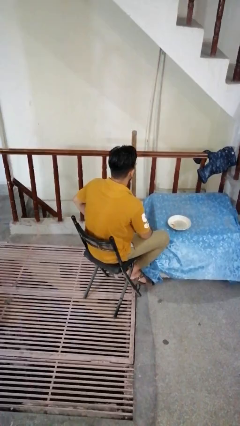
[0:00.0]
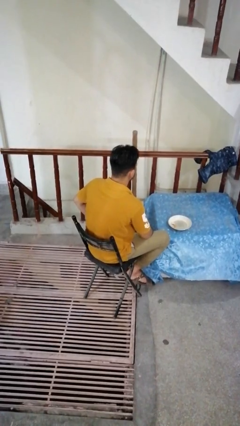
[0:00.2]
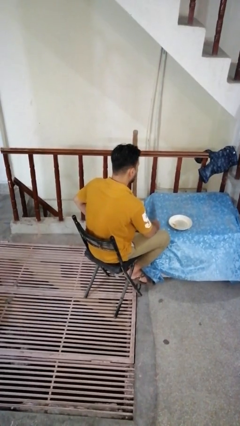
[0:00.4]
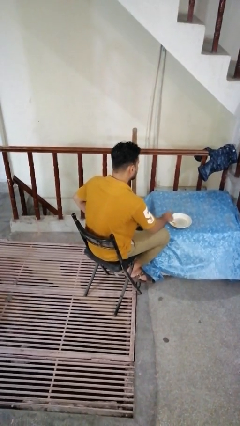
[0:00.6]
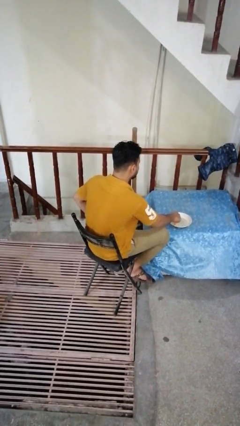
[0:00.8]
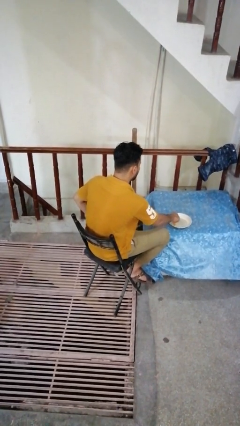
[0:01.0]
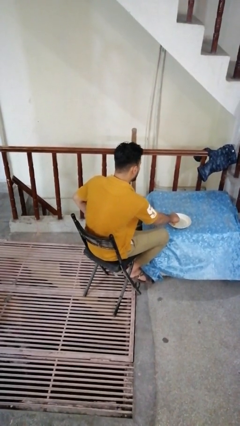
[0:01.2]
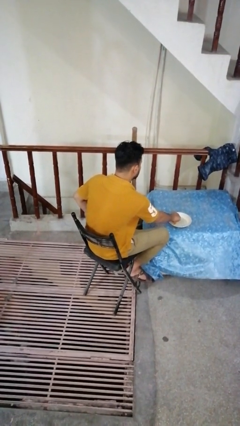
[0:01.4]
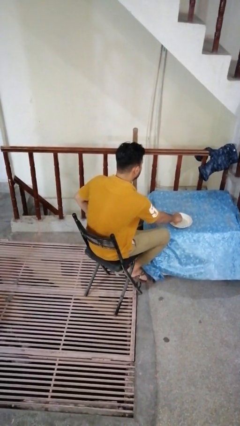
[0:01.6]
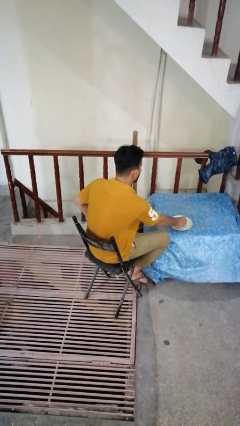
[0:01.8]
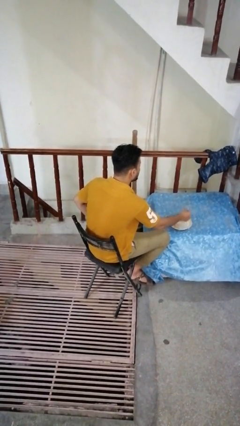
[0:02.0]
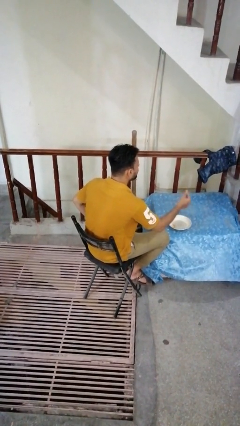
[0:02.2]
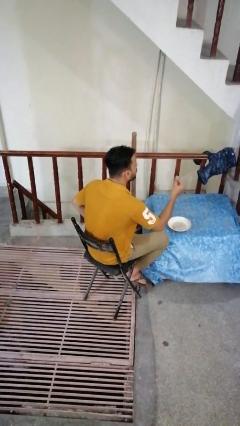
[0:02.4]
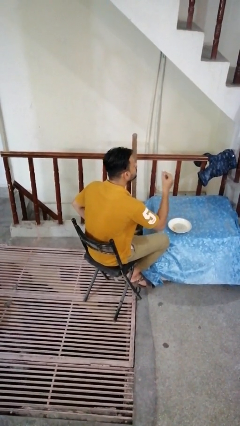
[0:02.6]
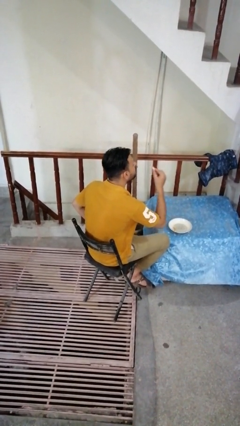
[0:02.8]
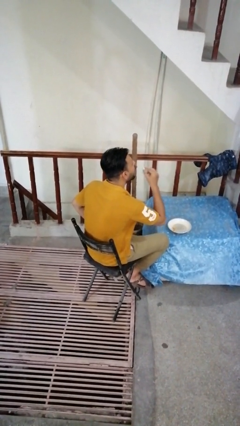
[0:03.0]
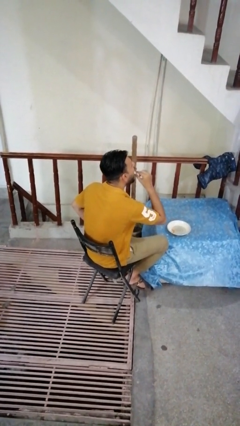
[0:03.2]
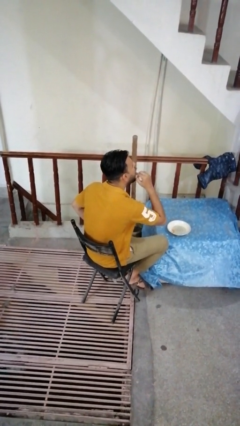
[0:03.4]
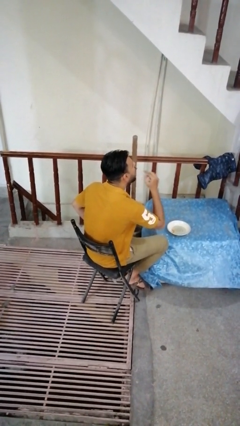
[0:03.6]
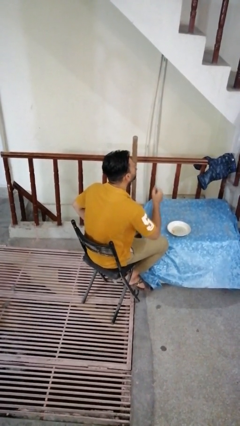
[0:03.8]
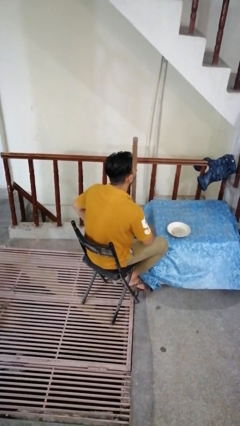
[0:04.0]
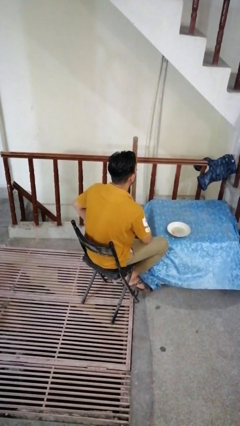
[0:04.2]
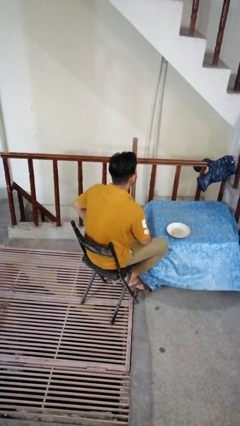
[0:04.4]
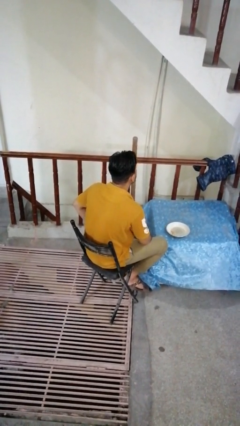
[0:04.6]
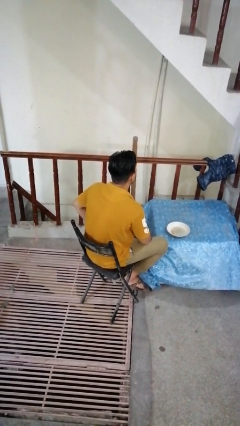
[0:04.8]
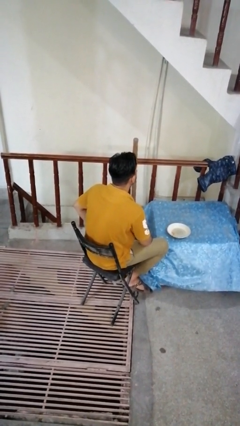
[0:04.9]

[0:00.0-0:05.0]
person eats with hands

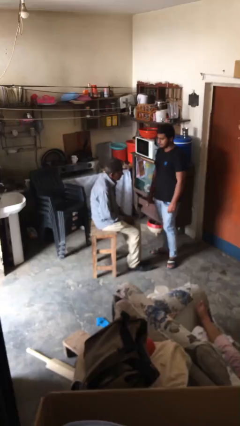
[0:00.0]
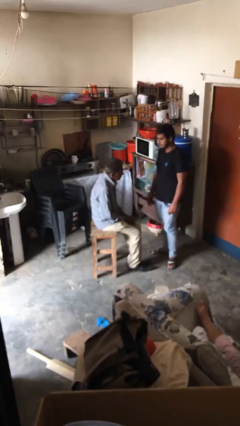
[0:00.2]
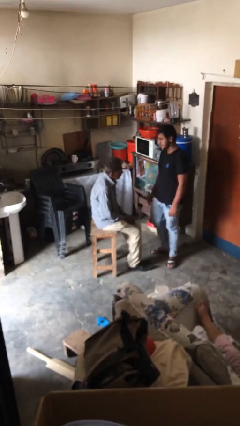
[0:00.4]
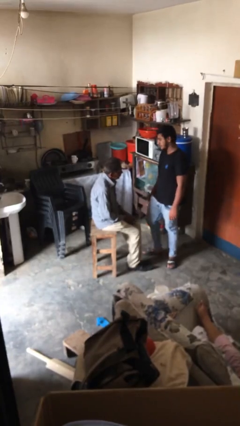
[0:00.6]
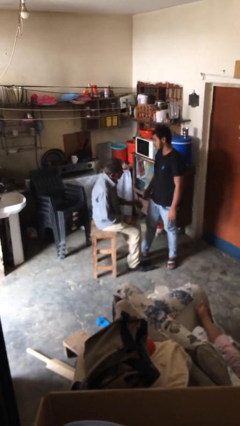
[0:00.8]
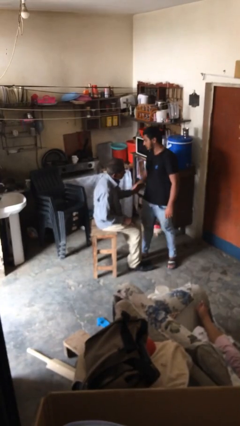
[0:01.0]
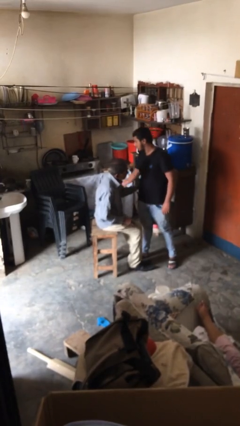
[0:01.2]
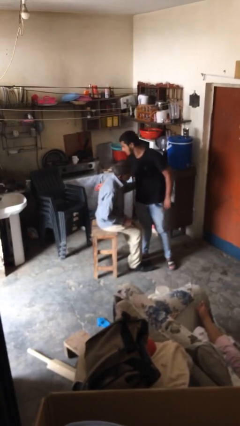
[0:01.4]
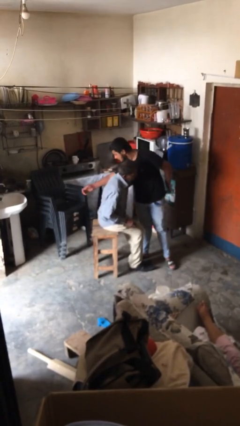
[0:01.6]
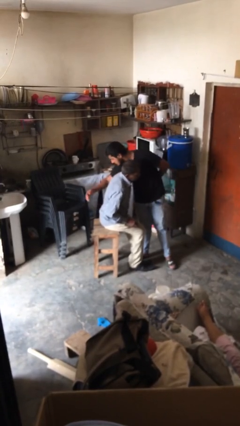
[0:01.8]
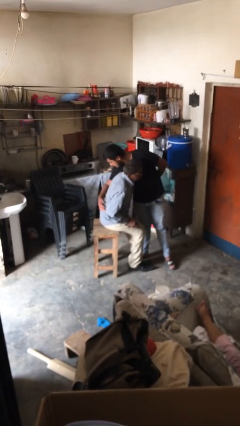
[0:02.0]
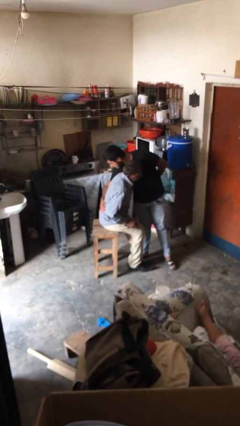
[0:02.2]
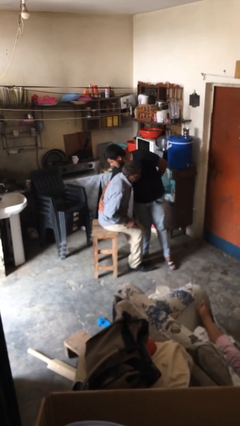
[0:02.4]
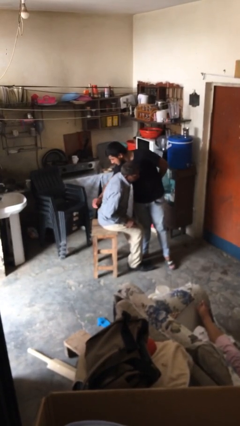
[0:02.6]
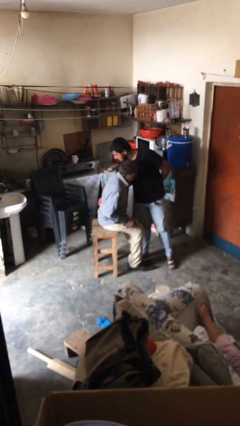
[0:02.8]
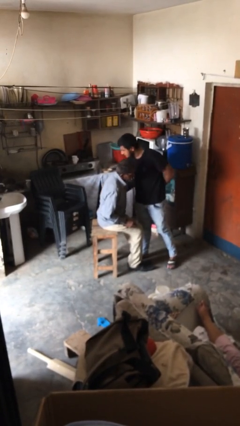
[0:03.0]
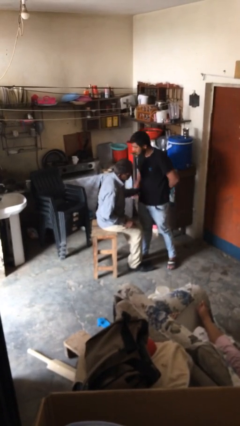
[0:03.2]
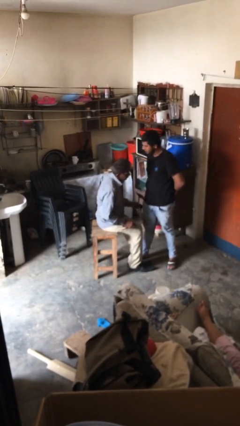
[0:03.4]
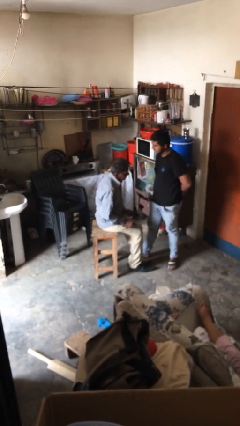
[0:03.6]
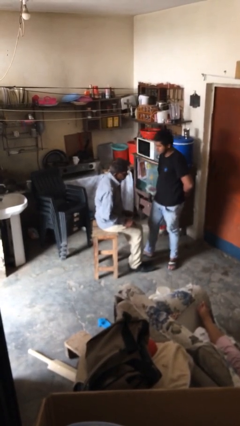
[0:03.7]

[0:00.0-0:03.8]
person embraces person

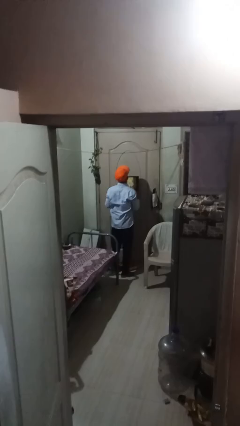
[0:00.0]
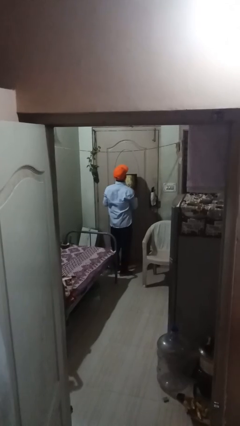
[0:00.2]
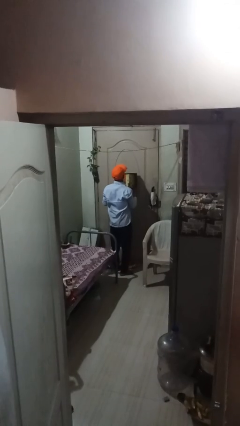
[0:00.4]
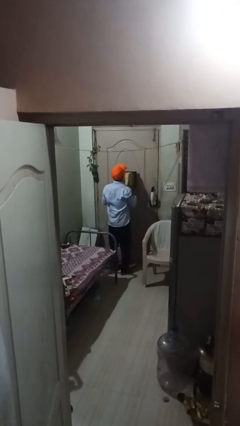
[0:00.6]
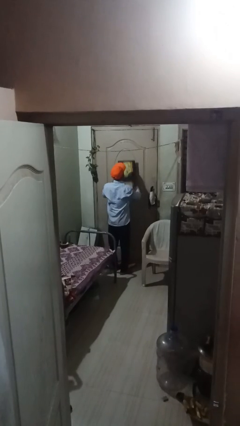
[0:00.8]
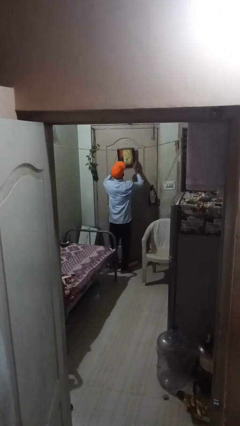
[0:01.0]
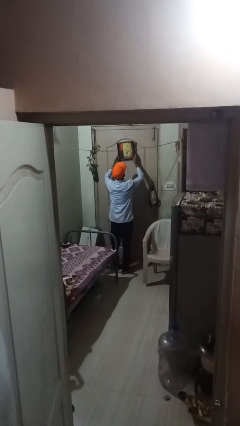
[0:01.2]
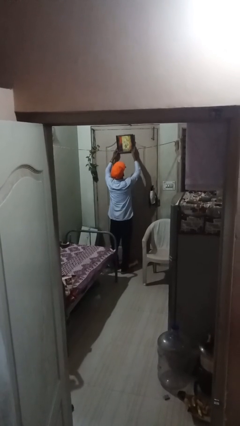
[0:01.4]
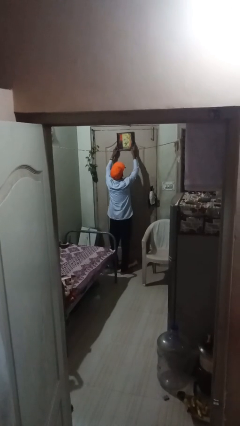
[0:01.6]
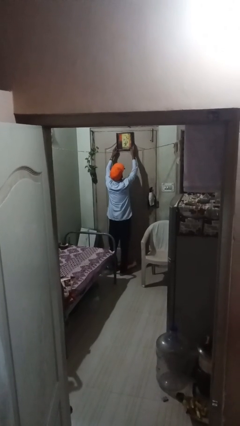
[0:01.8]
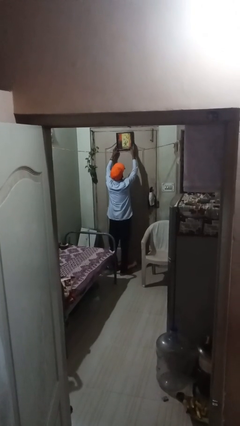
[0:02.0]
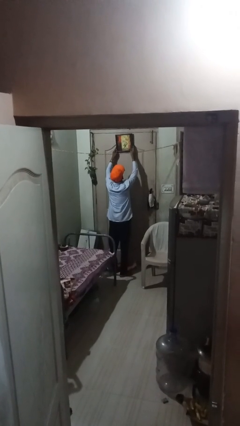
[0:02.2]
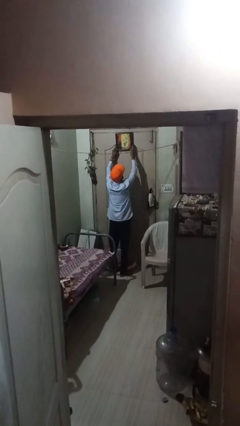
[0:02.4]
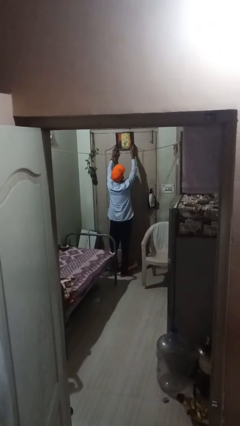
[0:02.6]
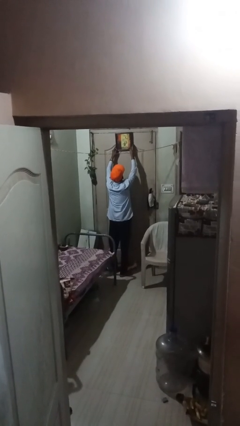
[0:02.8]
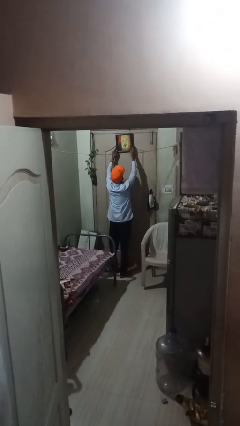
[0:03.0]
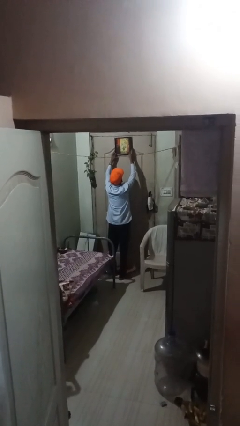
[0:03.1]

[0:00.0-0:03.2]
person puts up picture frame

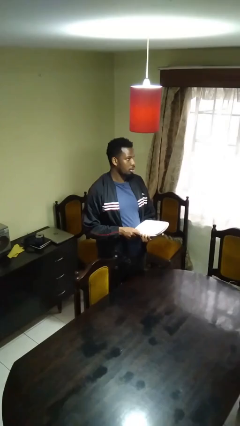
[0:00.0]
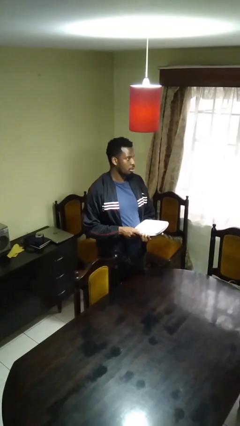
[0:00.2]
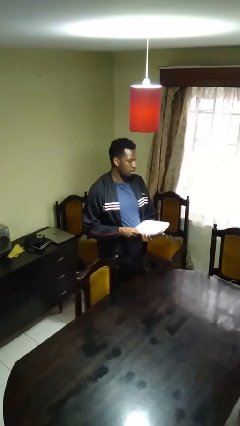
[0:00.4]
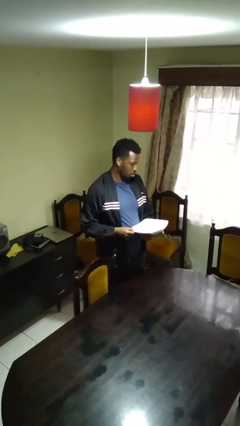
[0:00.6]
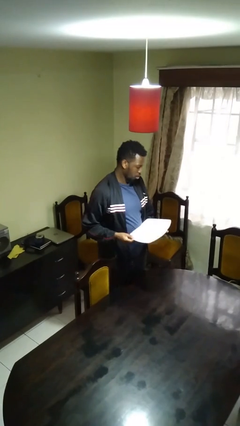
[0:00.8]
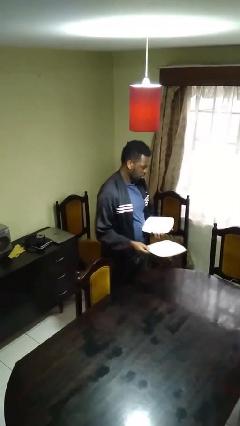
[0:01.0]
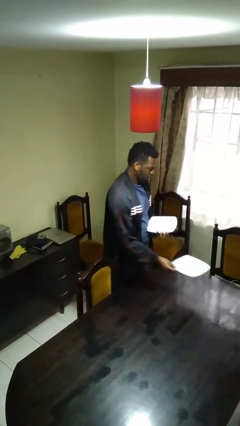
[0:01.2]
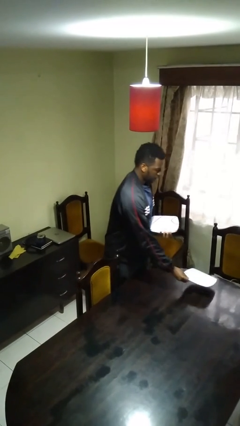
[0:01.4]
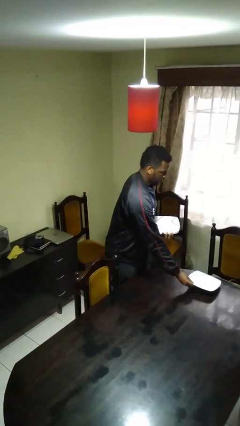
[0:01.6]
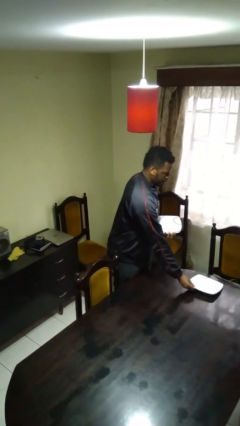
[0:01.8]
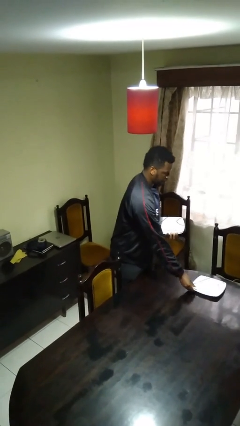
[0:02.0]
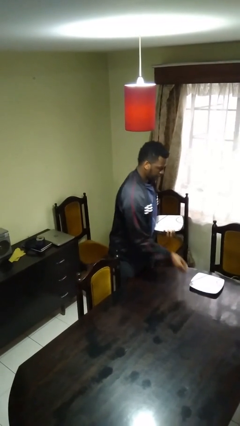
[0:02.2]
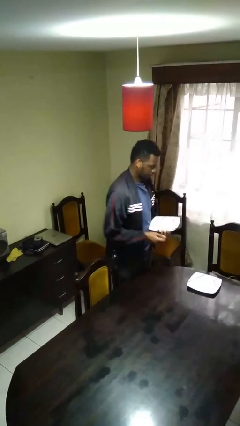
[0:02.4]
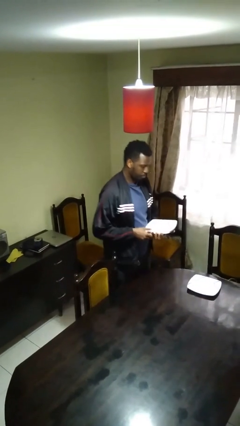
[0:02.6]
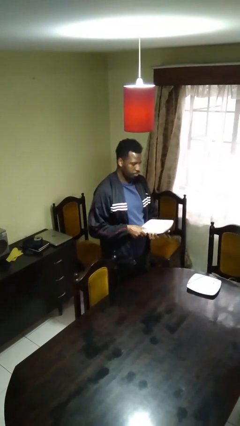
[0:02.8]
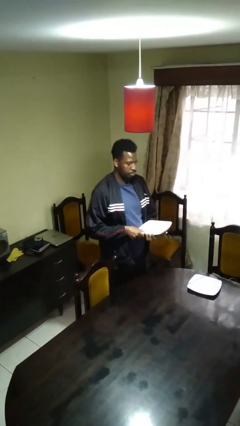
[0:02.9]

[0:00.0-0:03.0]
person sets table

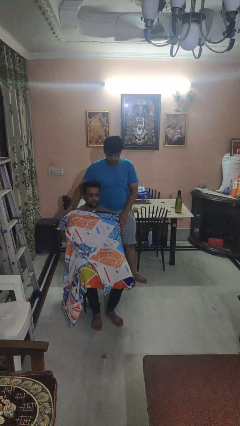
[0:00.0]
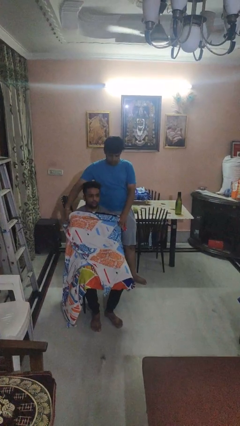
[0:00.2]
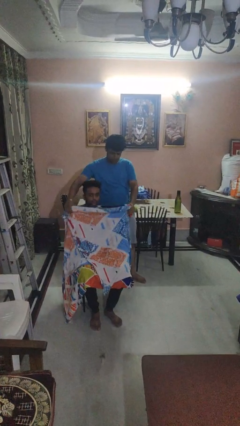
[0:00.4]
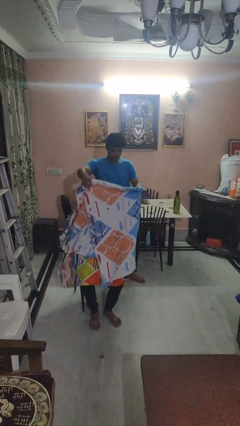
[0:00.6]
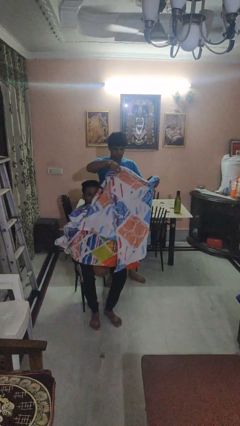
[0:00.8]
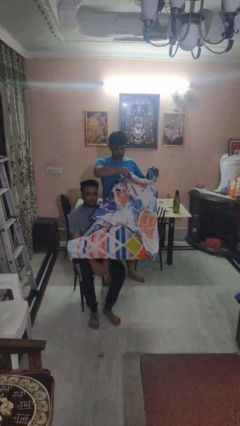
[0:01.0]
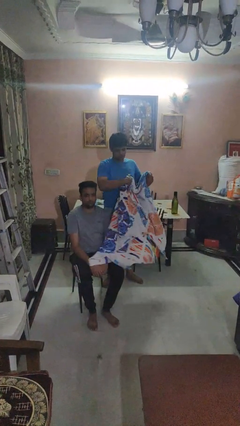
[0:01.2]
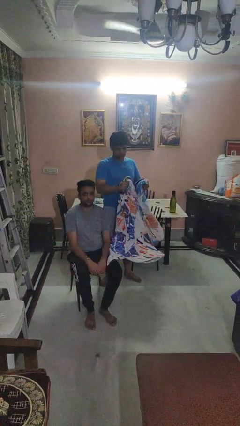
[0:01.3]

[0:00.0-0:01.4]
person uncovers friend with blanket

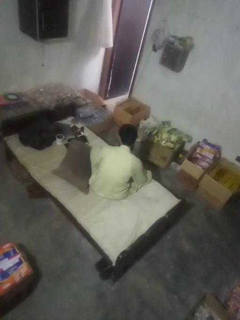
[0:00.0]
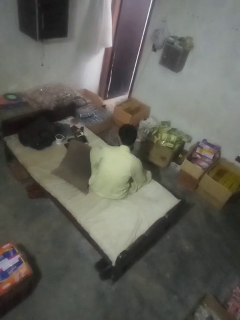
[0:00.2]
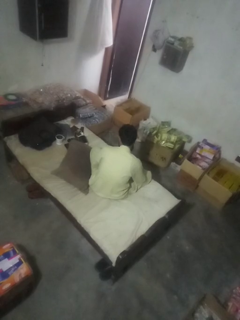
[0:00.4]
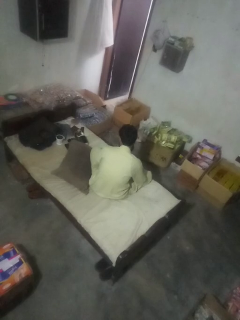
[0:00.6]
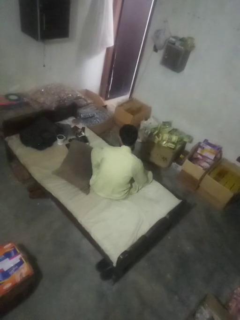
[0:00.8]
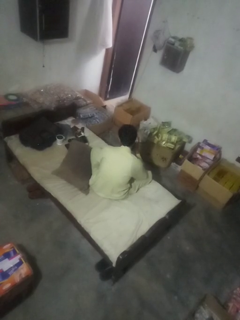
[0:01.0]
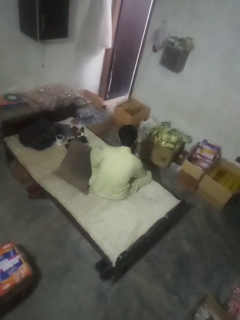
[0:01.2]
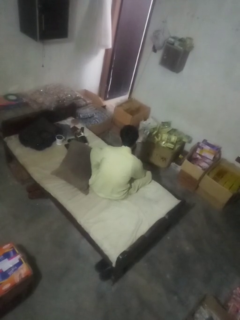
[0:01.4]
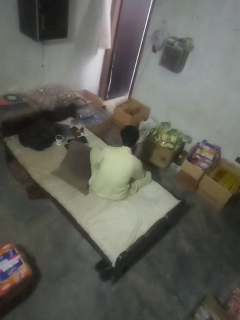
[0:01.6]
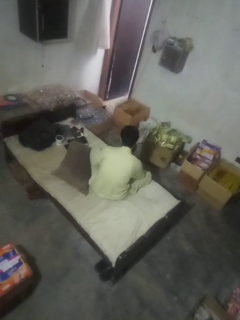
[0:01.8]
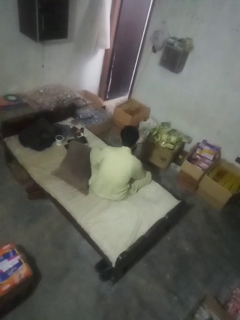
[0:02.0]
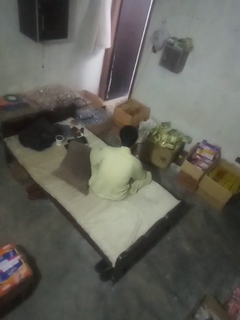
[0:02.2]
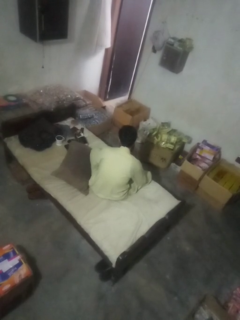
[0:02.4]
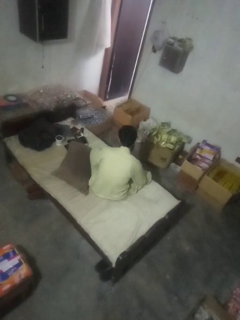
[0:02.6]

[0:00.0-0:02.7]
person strokes chin
